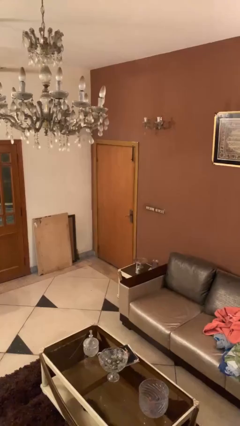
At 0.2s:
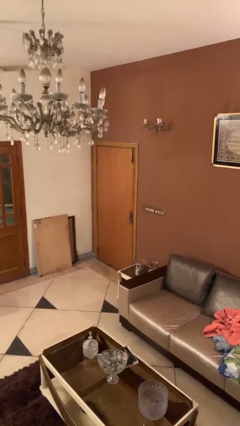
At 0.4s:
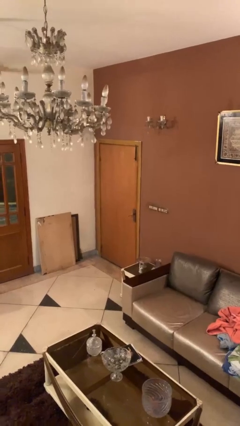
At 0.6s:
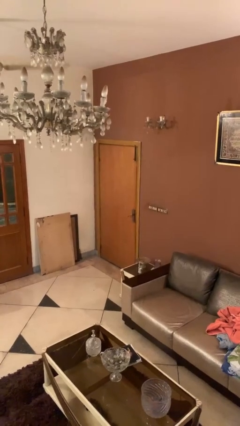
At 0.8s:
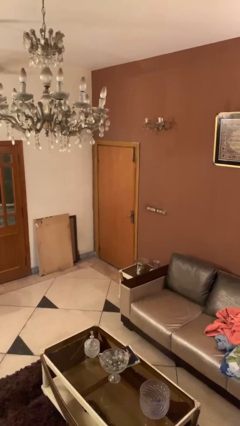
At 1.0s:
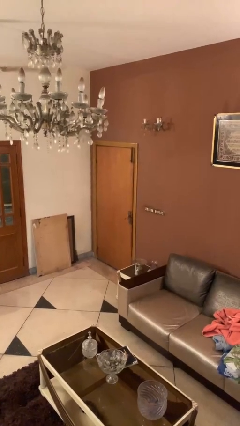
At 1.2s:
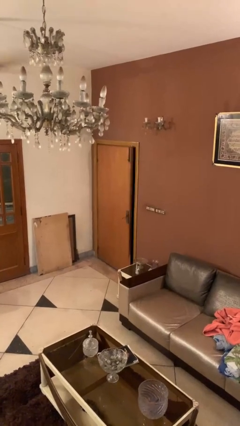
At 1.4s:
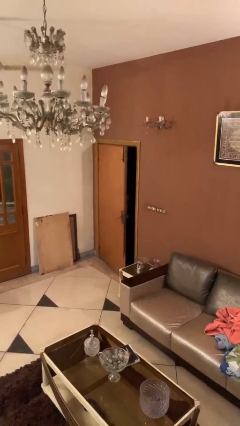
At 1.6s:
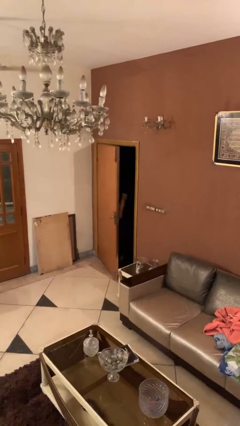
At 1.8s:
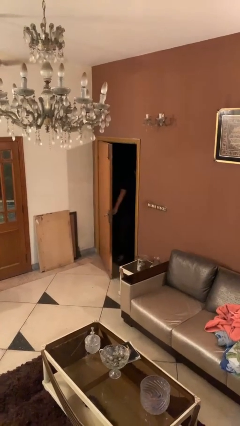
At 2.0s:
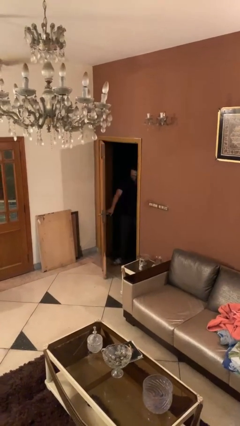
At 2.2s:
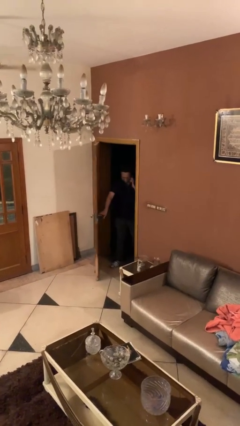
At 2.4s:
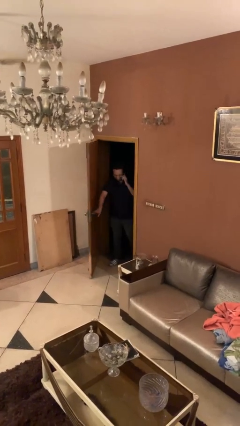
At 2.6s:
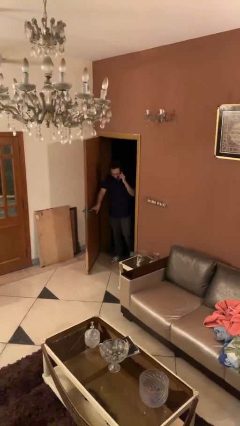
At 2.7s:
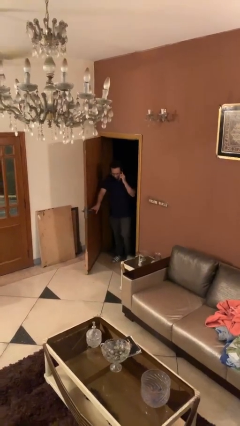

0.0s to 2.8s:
person opens facility door

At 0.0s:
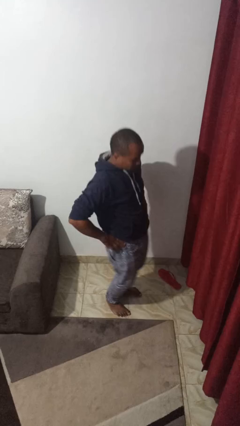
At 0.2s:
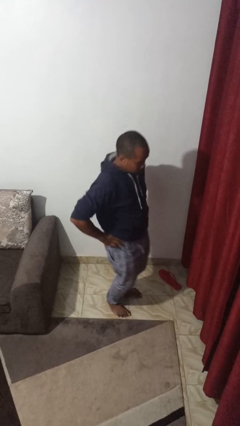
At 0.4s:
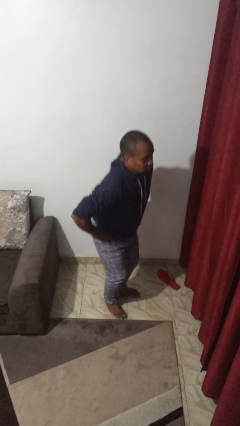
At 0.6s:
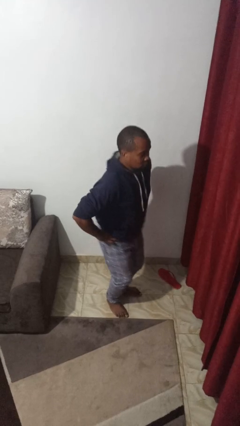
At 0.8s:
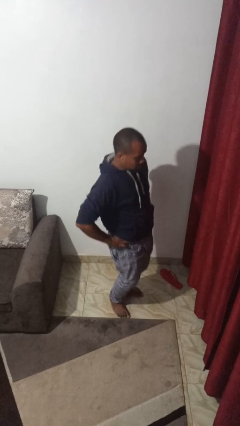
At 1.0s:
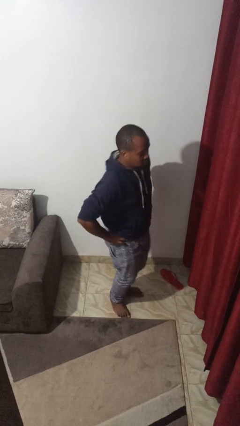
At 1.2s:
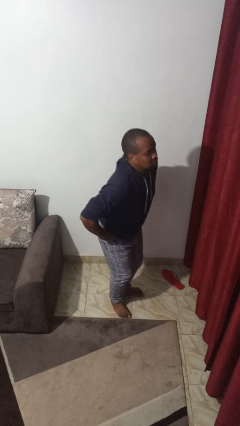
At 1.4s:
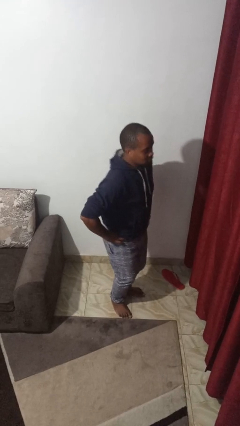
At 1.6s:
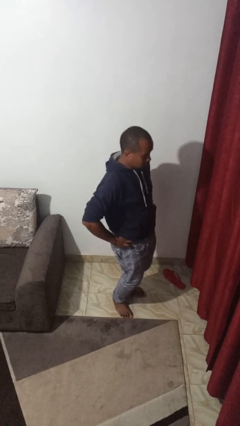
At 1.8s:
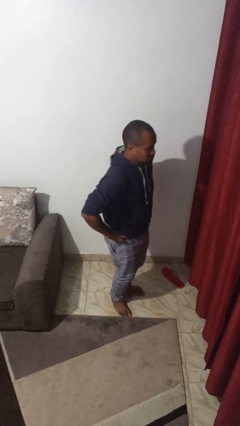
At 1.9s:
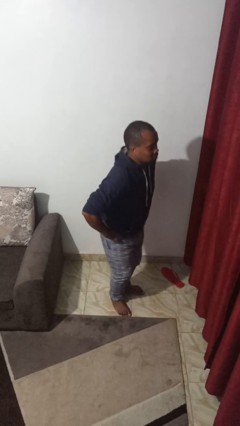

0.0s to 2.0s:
person wiggles hips

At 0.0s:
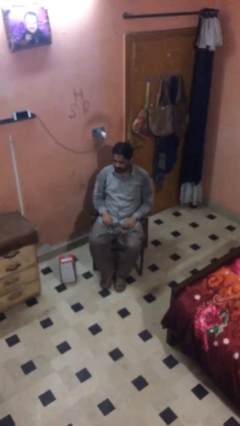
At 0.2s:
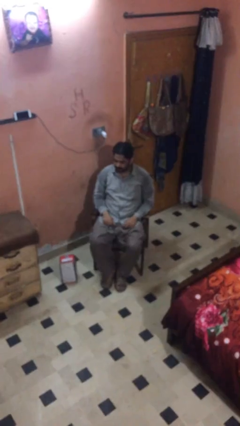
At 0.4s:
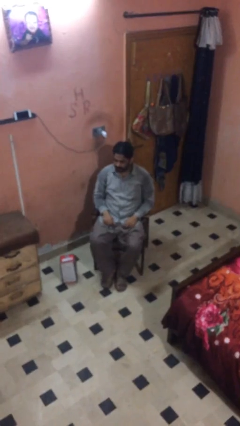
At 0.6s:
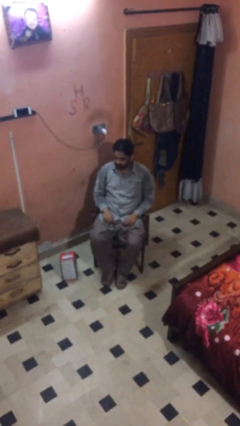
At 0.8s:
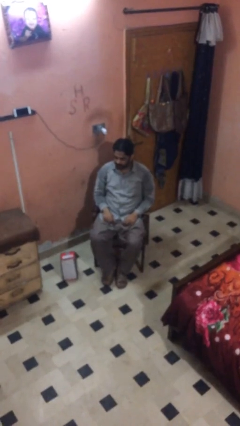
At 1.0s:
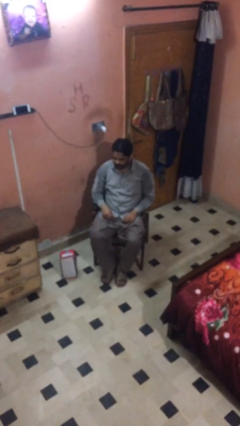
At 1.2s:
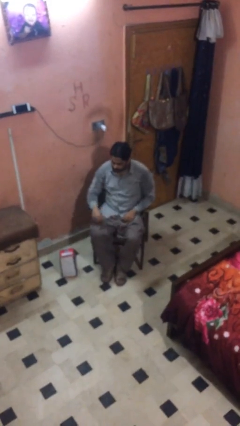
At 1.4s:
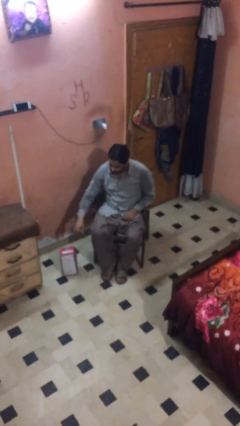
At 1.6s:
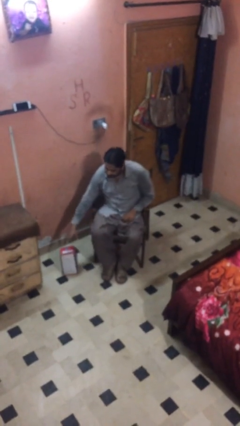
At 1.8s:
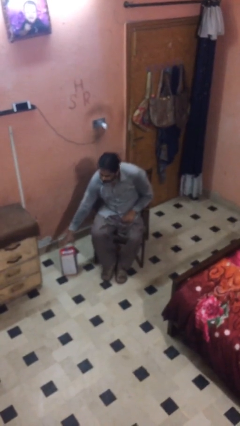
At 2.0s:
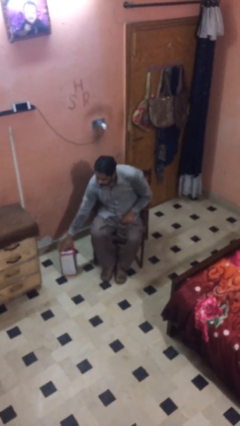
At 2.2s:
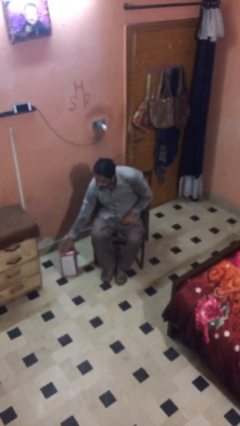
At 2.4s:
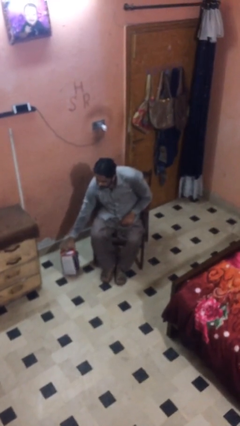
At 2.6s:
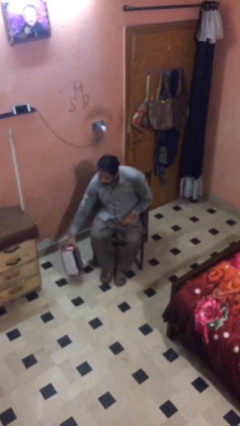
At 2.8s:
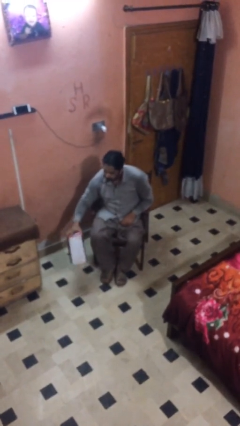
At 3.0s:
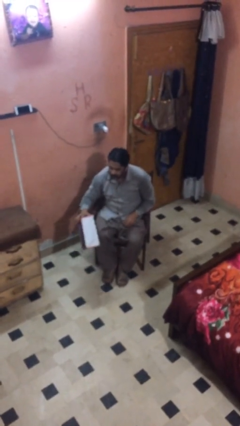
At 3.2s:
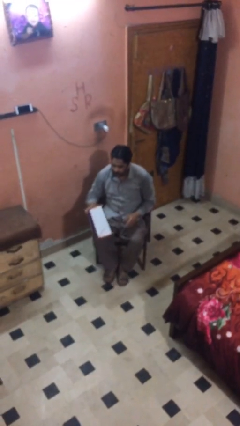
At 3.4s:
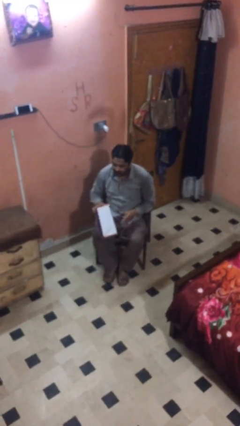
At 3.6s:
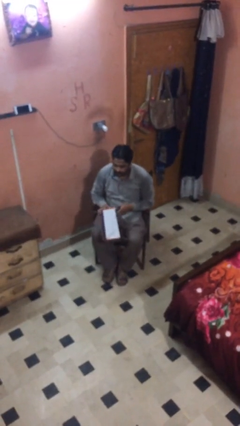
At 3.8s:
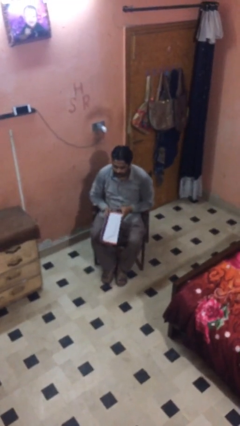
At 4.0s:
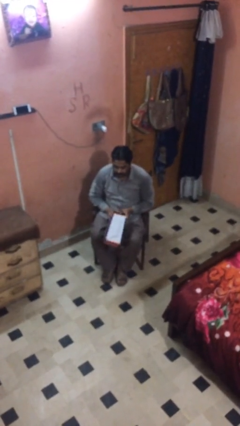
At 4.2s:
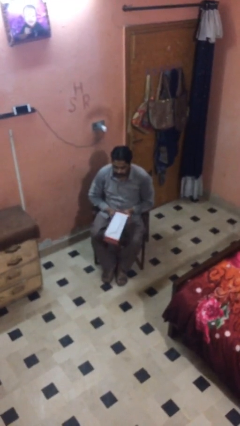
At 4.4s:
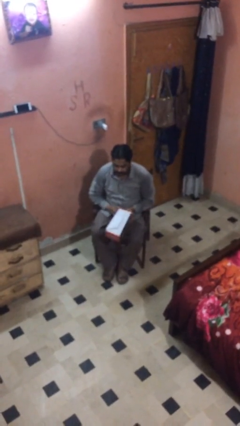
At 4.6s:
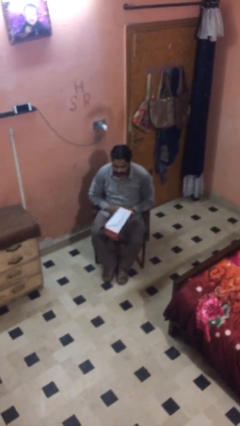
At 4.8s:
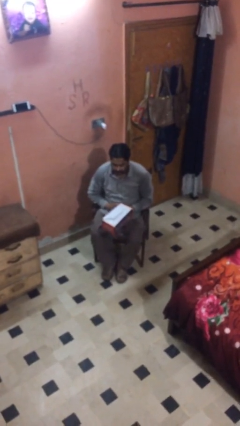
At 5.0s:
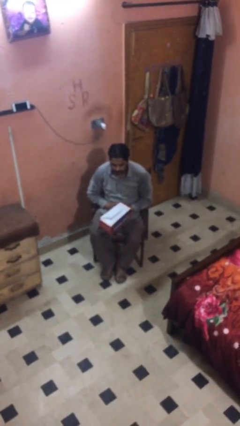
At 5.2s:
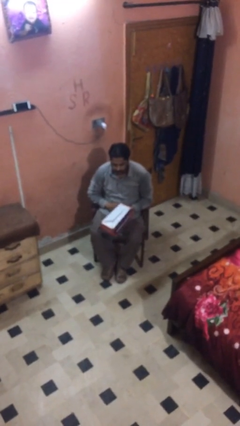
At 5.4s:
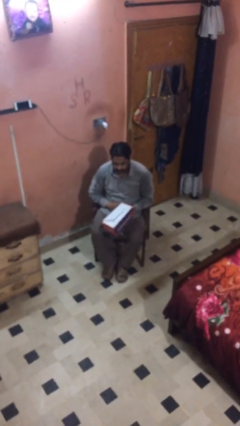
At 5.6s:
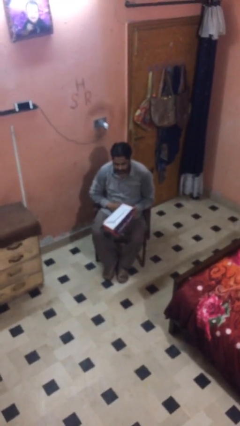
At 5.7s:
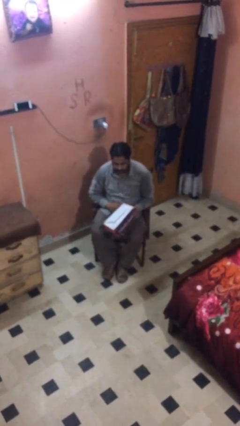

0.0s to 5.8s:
person picks up object from floor

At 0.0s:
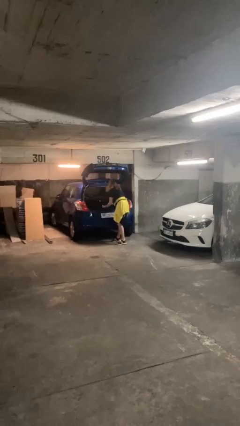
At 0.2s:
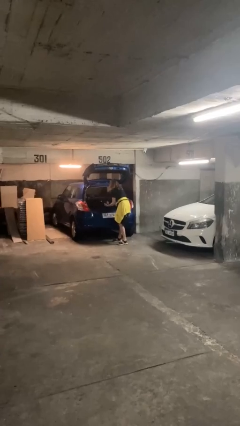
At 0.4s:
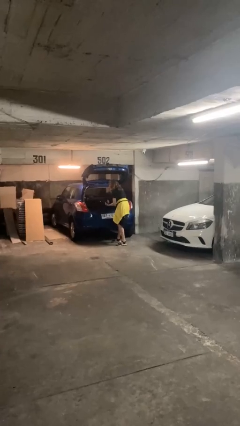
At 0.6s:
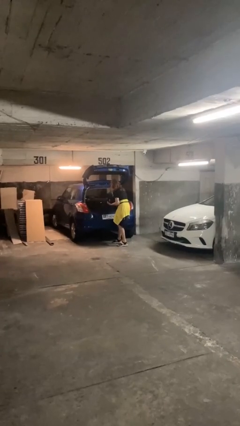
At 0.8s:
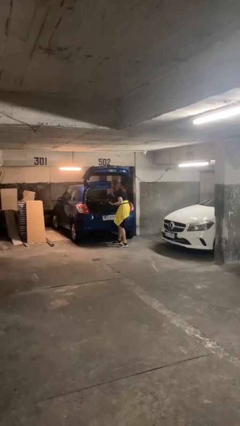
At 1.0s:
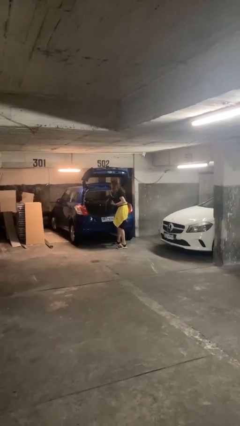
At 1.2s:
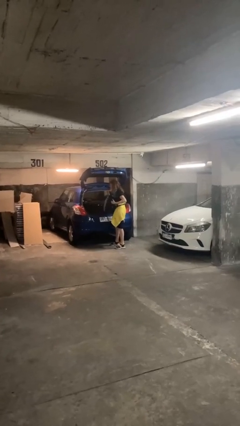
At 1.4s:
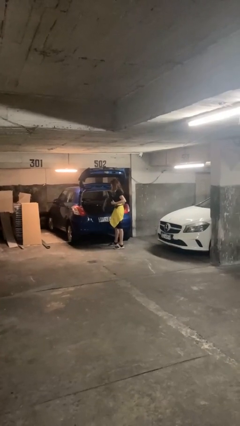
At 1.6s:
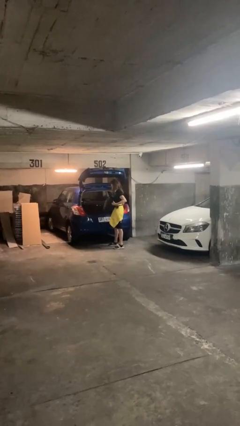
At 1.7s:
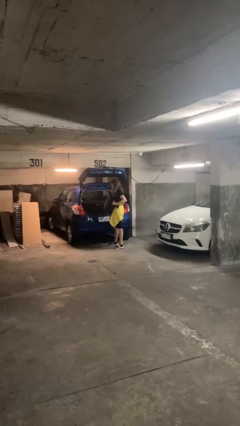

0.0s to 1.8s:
person unloads car

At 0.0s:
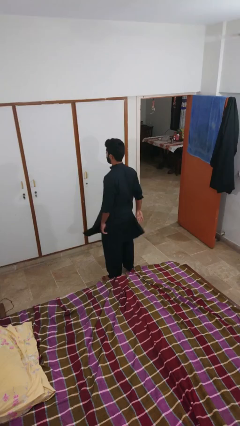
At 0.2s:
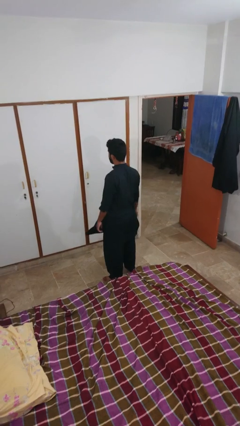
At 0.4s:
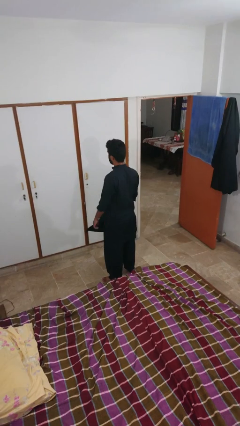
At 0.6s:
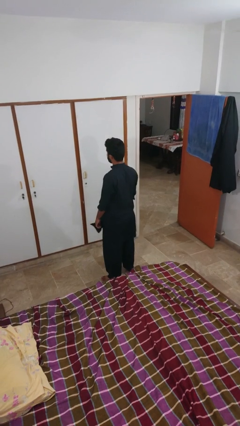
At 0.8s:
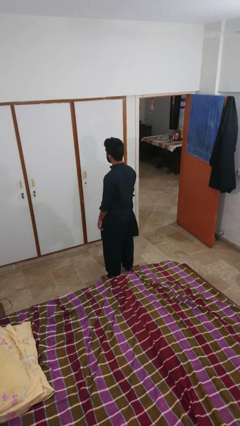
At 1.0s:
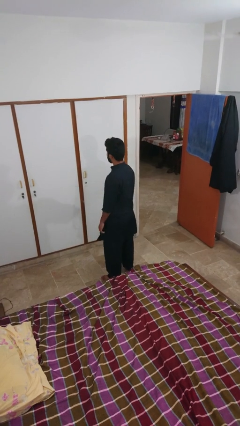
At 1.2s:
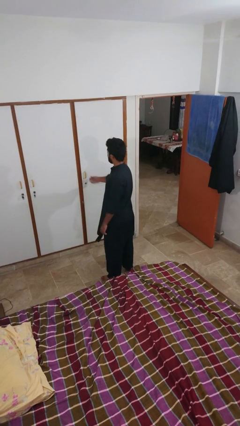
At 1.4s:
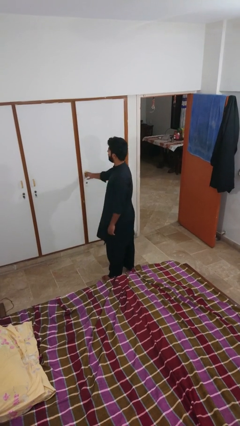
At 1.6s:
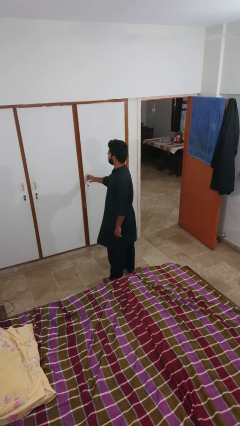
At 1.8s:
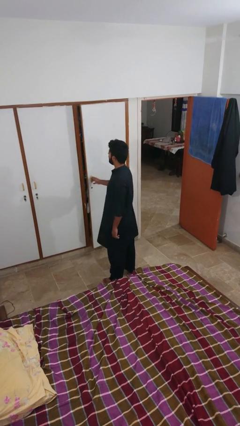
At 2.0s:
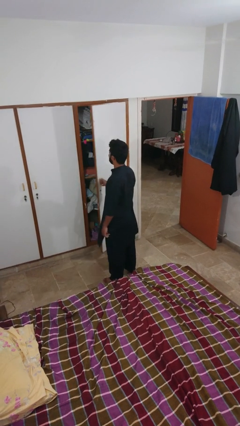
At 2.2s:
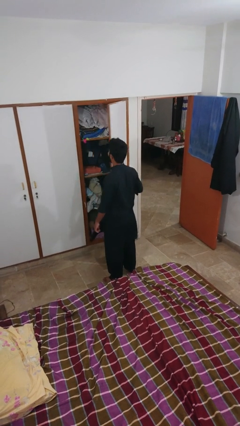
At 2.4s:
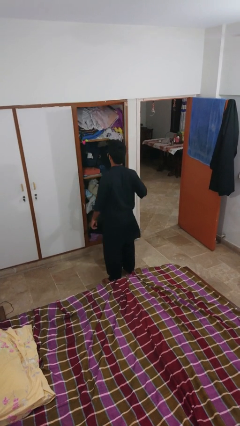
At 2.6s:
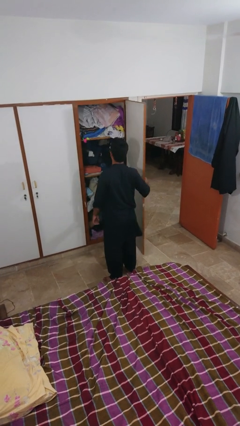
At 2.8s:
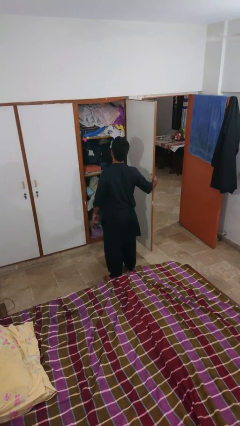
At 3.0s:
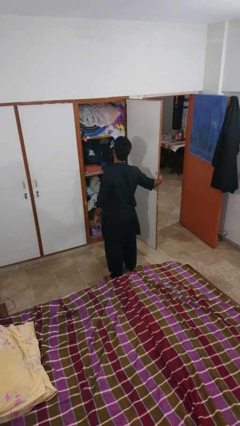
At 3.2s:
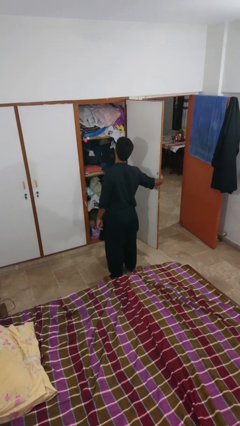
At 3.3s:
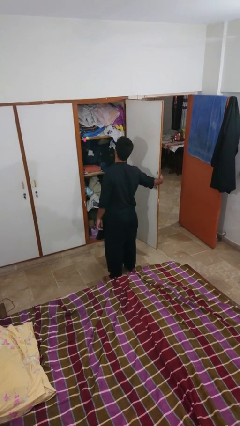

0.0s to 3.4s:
person opens closet door

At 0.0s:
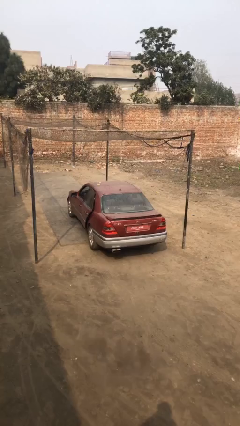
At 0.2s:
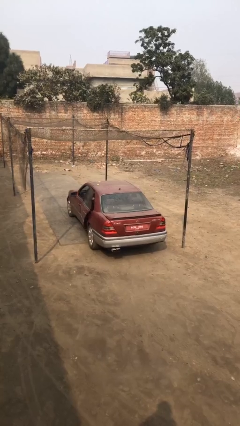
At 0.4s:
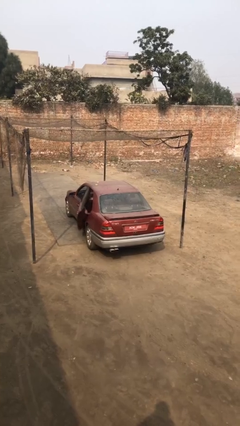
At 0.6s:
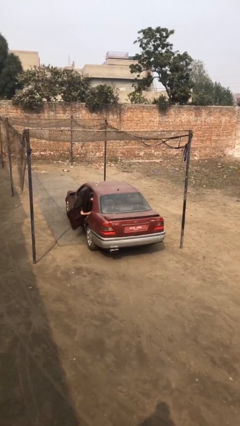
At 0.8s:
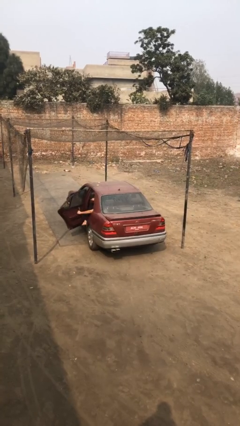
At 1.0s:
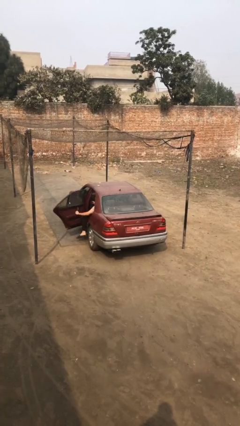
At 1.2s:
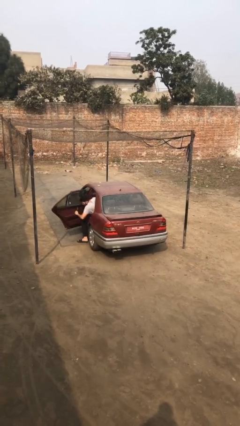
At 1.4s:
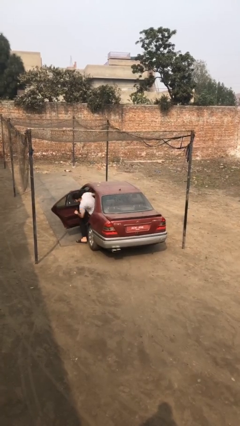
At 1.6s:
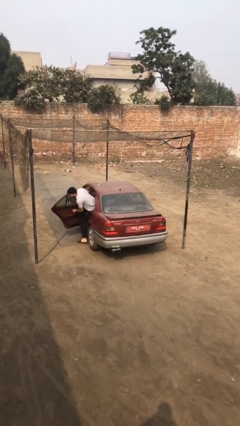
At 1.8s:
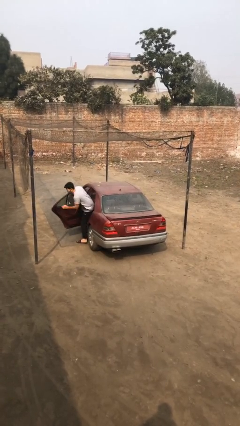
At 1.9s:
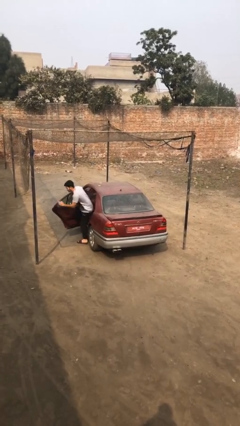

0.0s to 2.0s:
car drops off person
